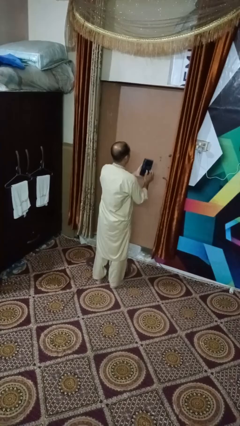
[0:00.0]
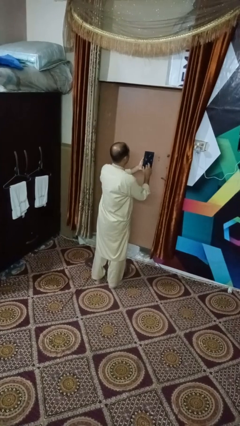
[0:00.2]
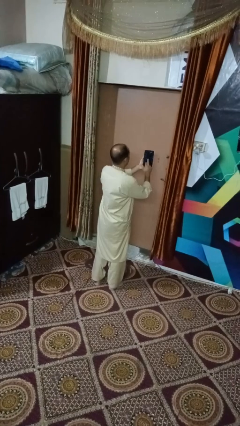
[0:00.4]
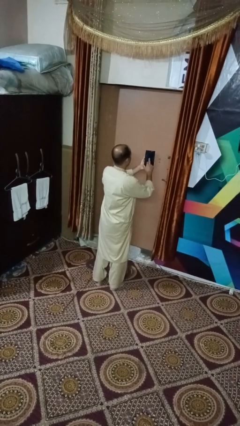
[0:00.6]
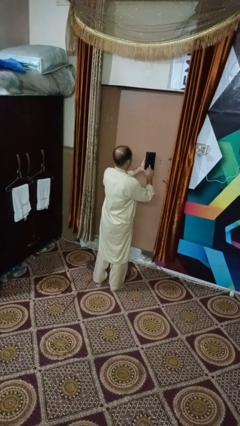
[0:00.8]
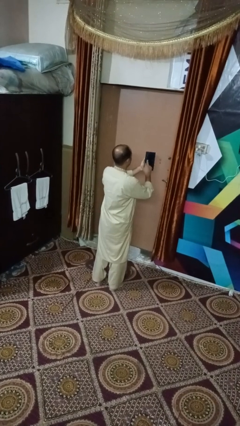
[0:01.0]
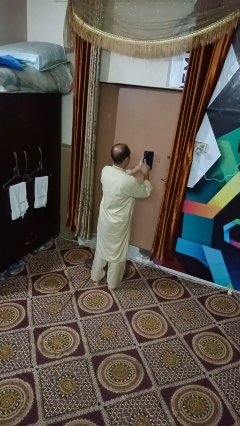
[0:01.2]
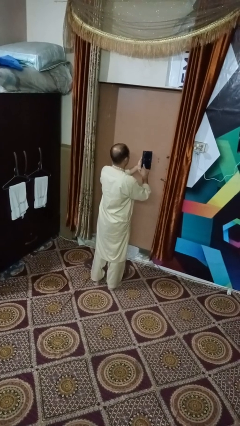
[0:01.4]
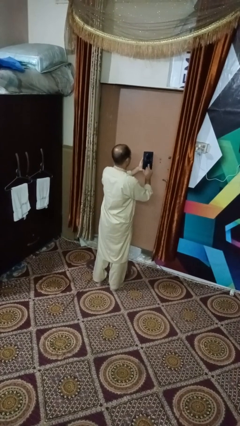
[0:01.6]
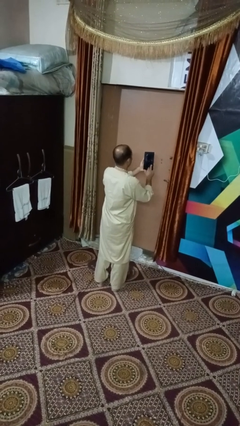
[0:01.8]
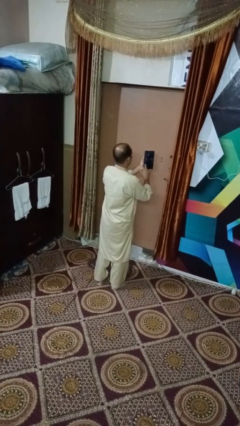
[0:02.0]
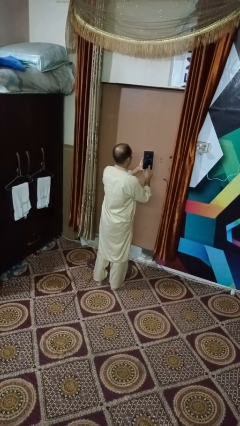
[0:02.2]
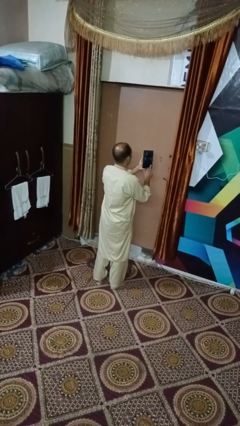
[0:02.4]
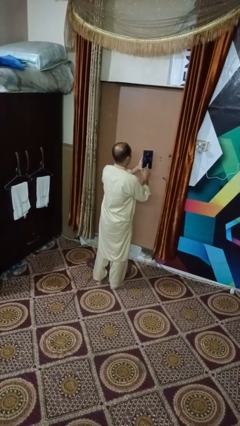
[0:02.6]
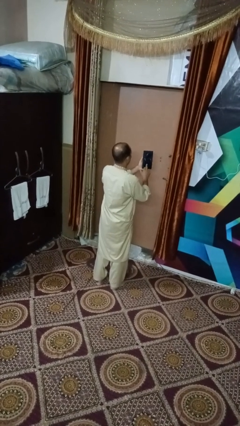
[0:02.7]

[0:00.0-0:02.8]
person interacts with tablet

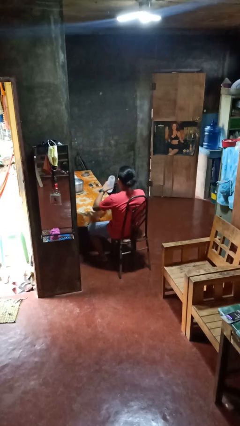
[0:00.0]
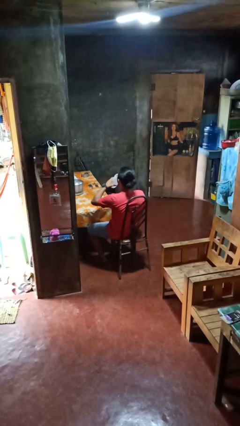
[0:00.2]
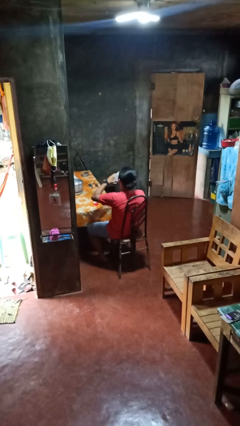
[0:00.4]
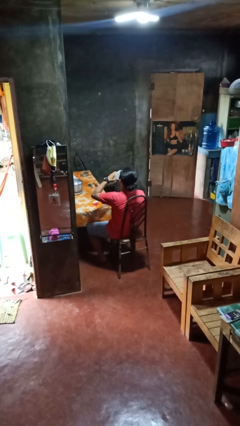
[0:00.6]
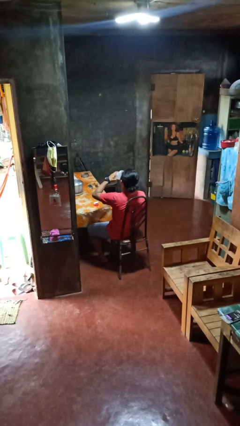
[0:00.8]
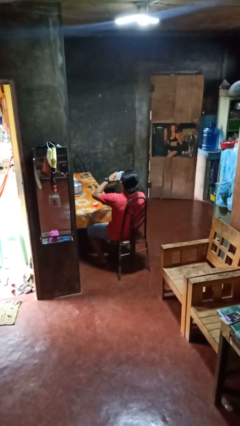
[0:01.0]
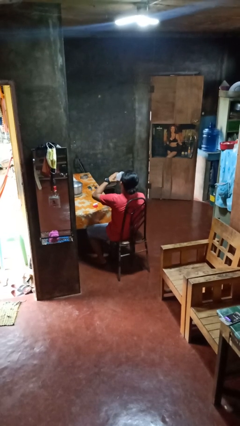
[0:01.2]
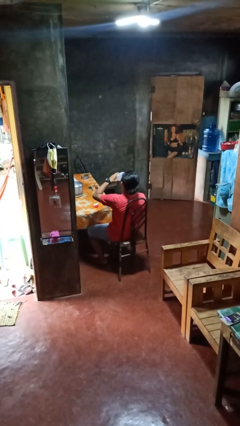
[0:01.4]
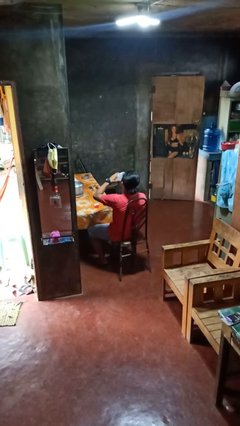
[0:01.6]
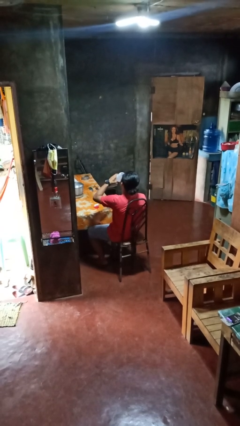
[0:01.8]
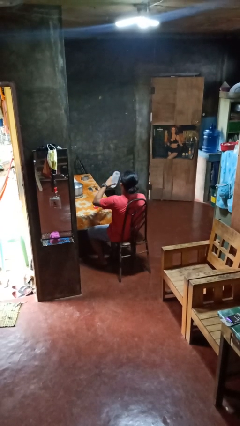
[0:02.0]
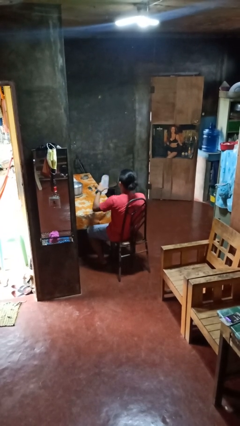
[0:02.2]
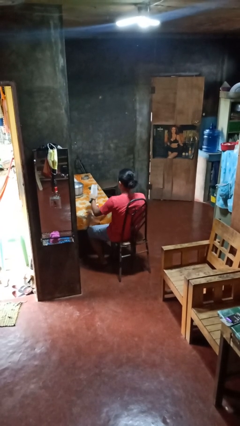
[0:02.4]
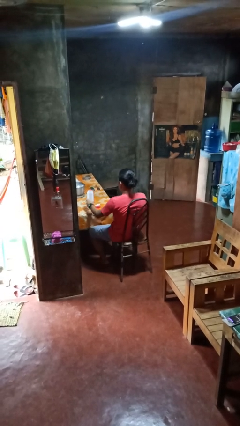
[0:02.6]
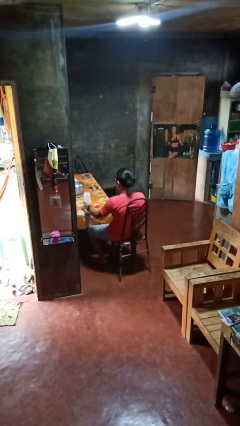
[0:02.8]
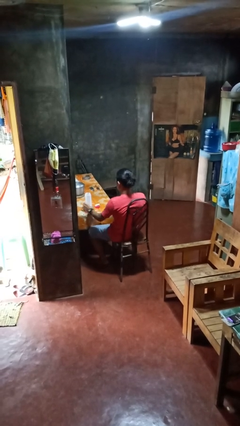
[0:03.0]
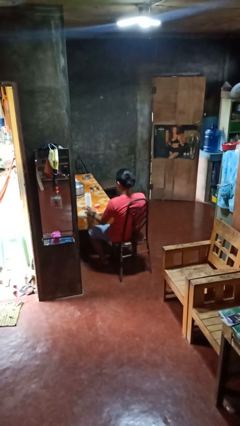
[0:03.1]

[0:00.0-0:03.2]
person drinks from bottle

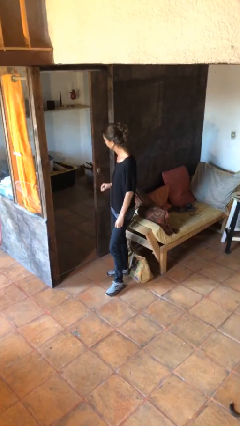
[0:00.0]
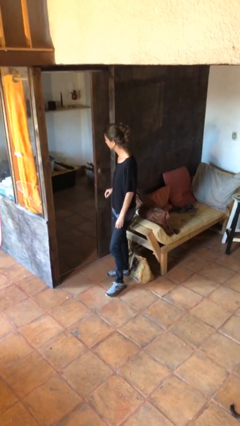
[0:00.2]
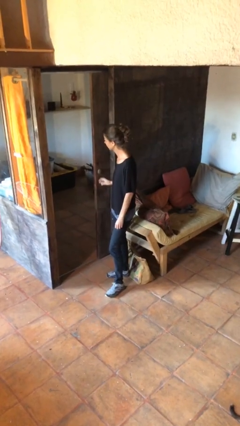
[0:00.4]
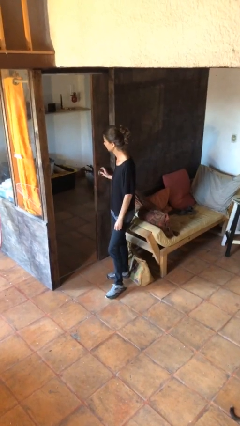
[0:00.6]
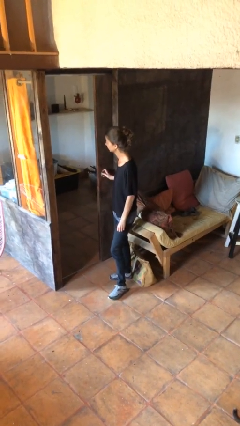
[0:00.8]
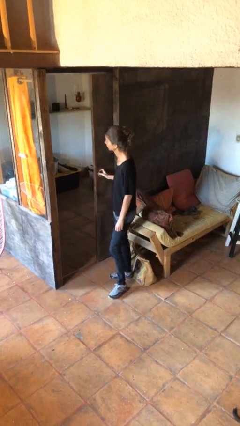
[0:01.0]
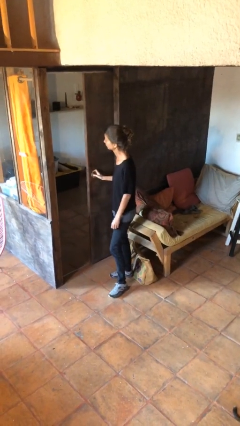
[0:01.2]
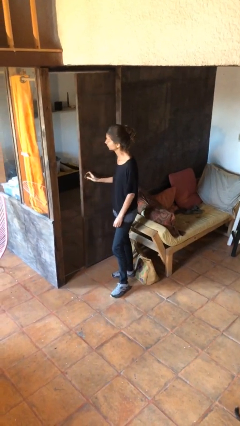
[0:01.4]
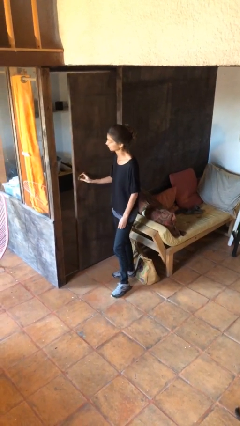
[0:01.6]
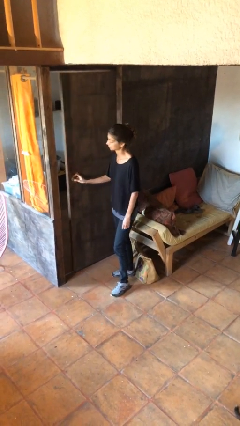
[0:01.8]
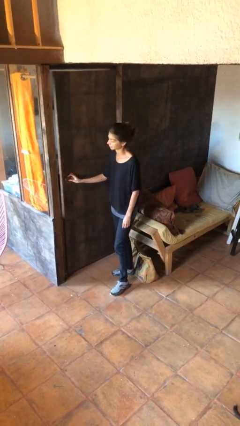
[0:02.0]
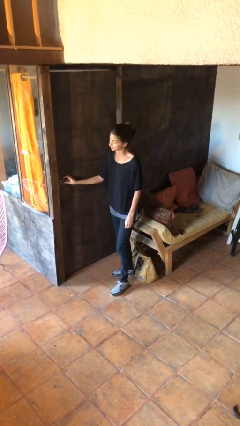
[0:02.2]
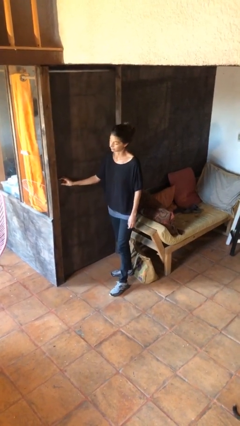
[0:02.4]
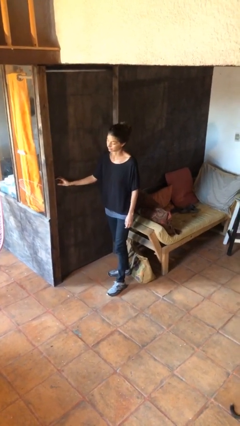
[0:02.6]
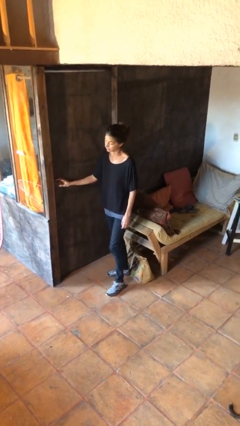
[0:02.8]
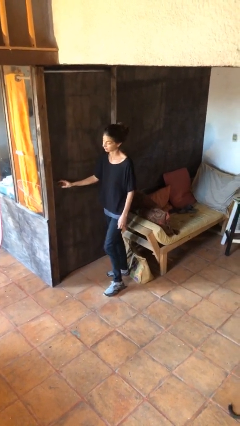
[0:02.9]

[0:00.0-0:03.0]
person closes sliding door

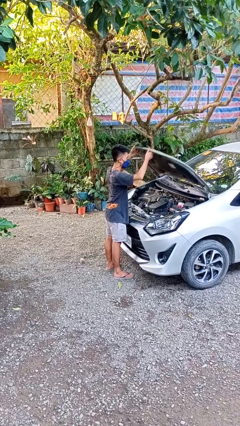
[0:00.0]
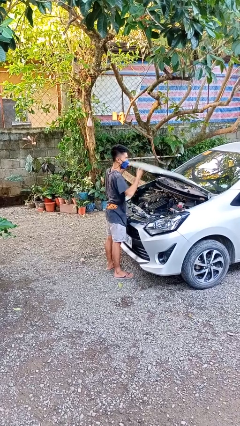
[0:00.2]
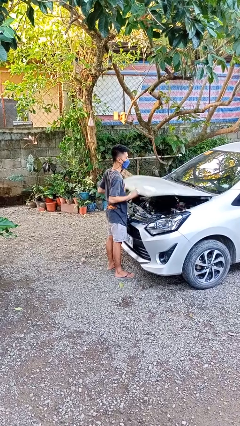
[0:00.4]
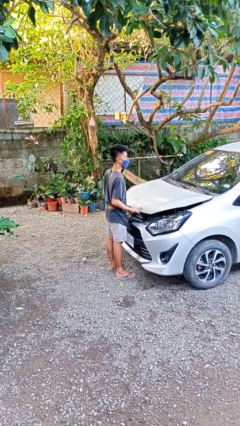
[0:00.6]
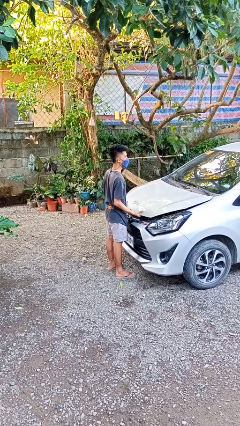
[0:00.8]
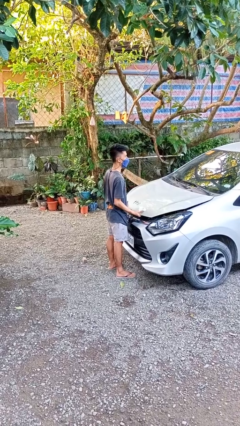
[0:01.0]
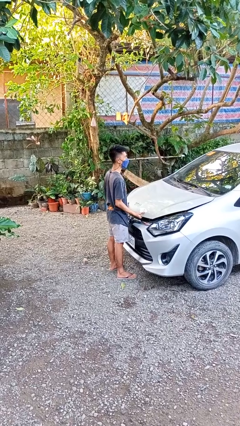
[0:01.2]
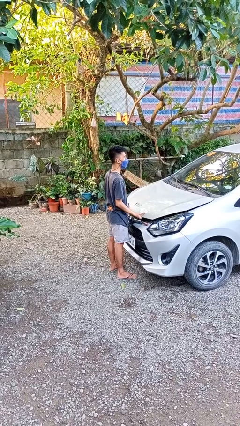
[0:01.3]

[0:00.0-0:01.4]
person closes car hood

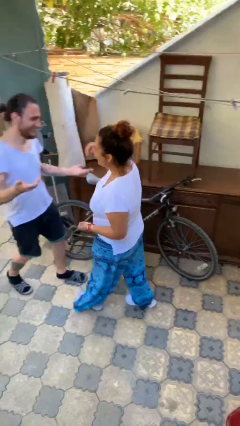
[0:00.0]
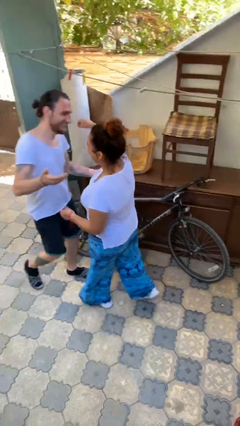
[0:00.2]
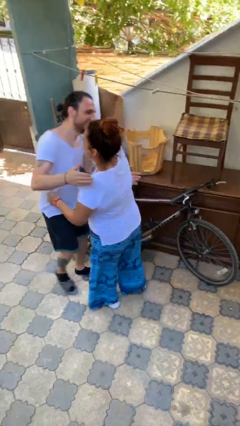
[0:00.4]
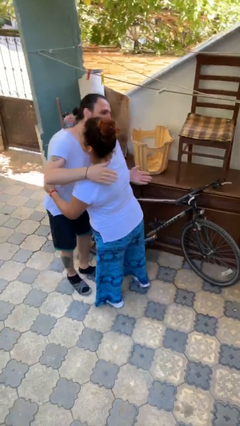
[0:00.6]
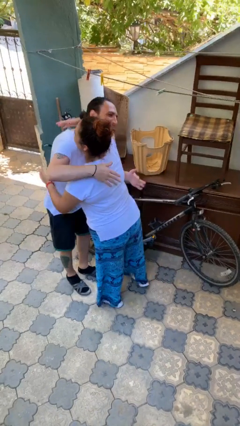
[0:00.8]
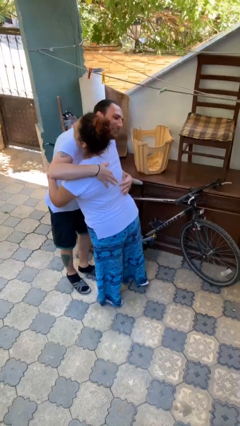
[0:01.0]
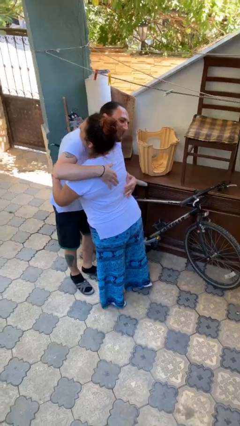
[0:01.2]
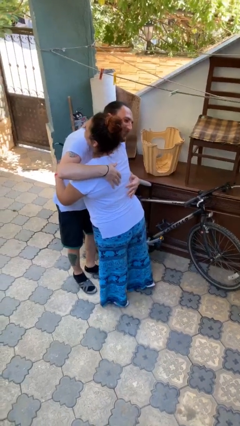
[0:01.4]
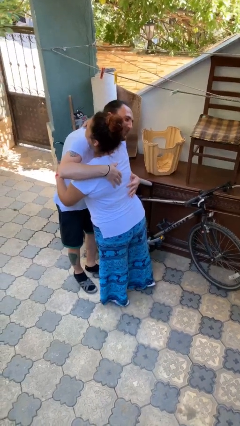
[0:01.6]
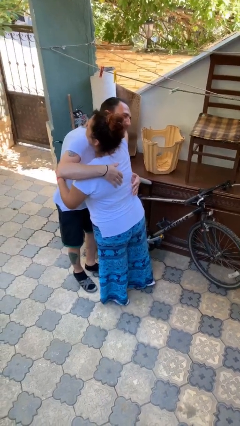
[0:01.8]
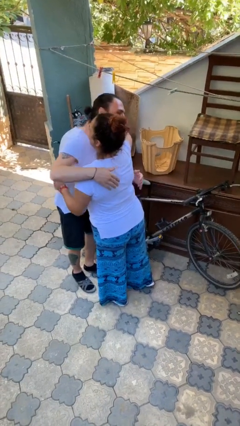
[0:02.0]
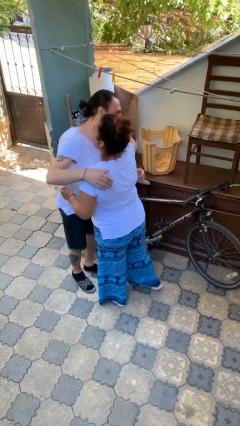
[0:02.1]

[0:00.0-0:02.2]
person embraces person

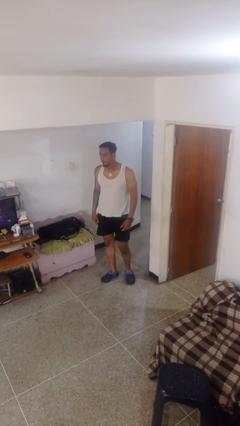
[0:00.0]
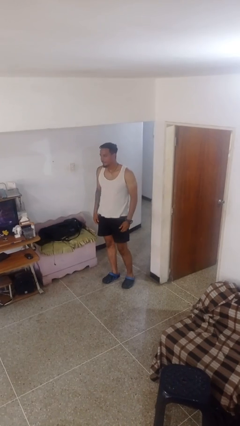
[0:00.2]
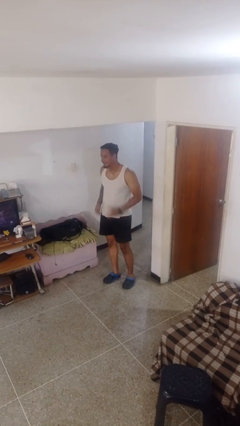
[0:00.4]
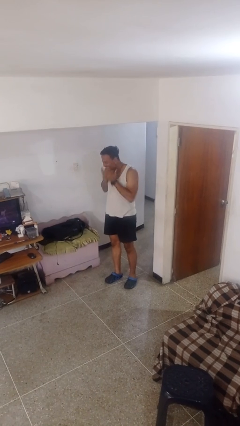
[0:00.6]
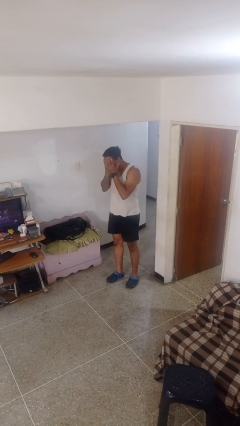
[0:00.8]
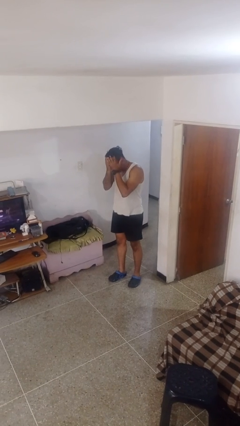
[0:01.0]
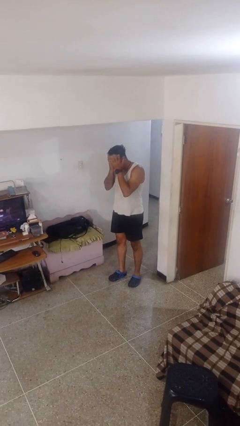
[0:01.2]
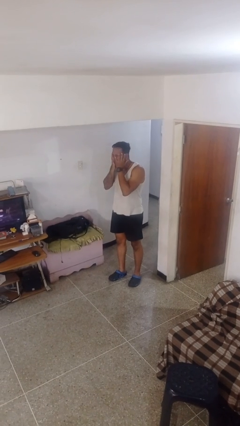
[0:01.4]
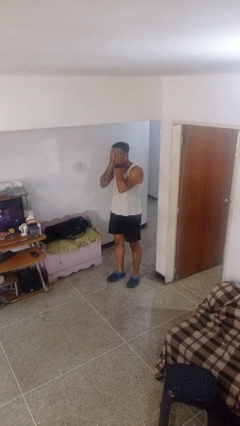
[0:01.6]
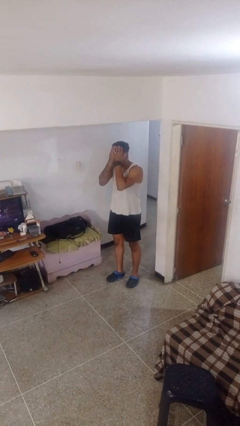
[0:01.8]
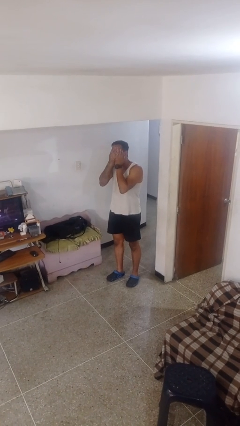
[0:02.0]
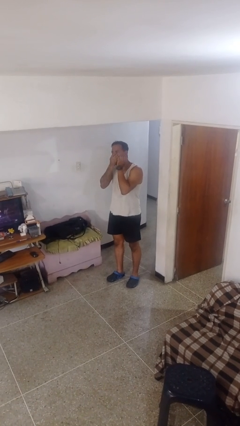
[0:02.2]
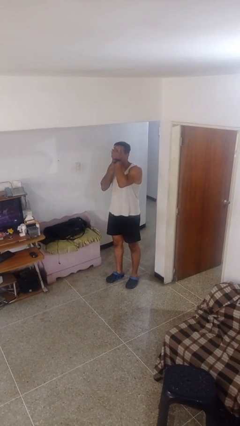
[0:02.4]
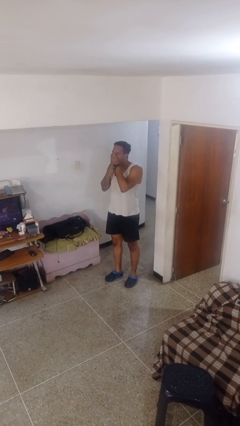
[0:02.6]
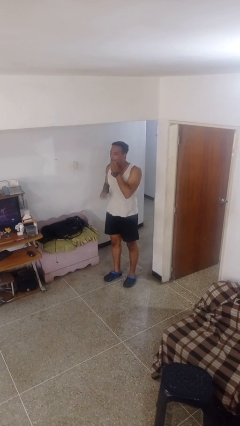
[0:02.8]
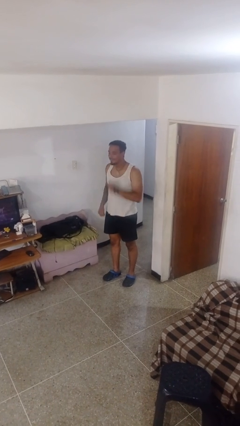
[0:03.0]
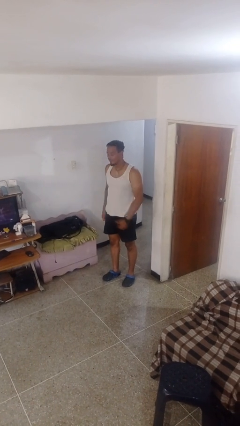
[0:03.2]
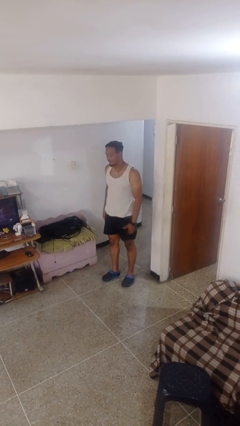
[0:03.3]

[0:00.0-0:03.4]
person scratches face

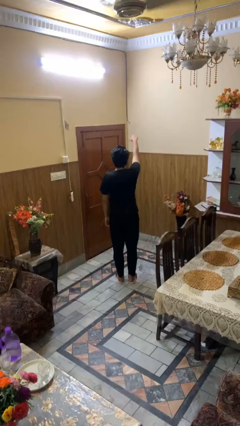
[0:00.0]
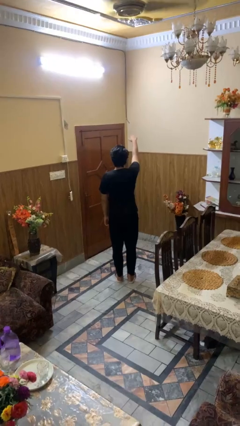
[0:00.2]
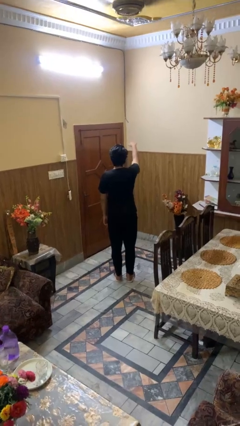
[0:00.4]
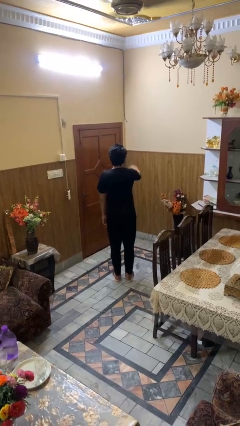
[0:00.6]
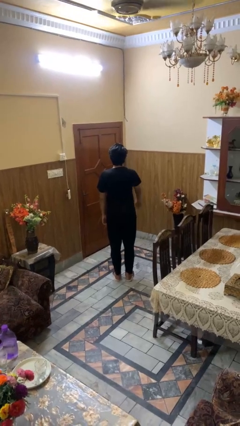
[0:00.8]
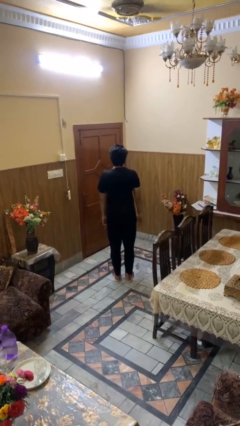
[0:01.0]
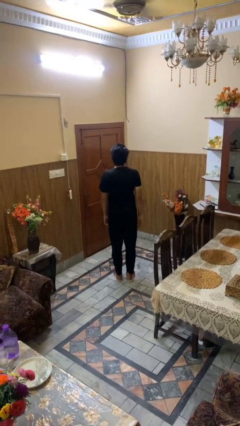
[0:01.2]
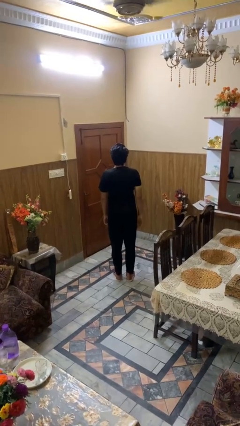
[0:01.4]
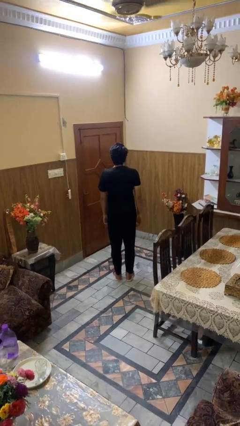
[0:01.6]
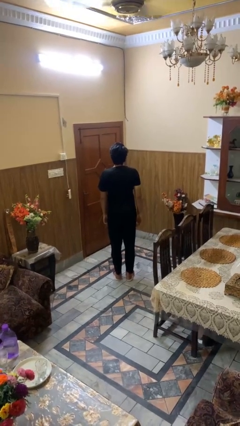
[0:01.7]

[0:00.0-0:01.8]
person gestures swipe down
